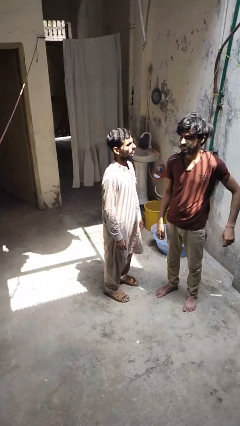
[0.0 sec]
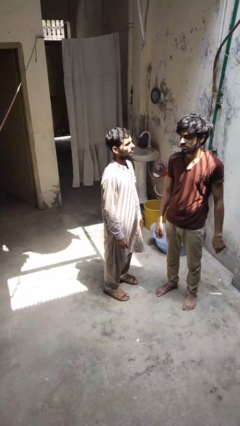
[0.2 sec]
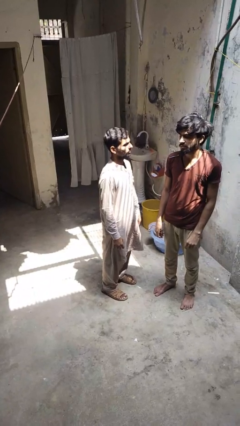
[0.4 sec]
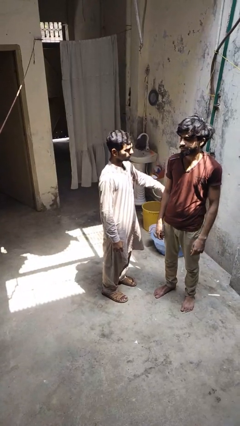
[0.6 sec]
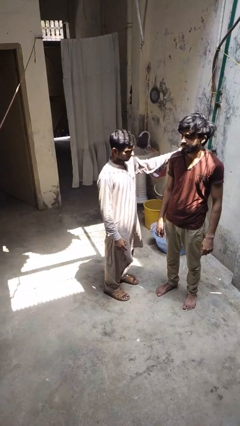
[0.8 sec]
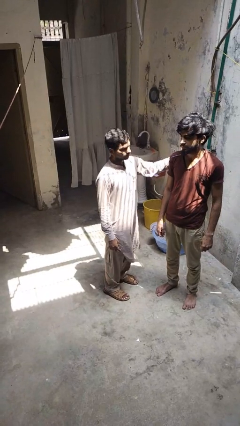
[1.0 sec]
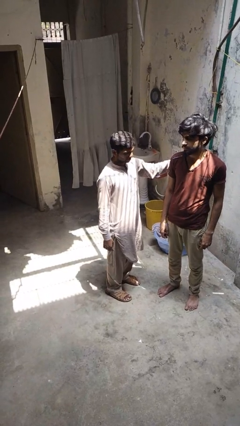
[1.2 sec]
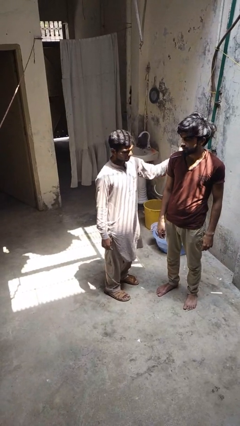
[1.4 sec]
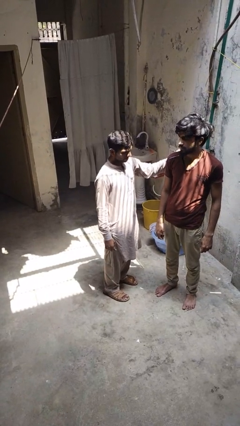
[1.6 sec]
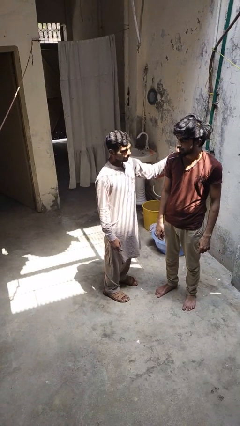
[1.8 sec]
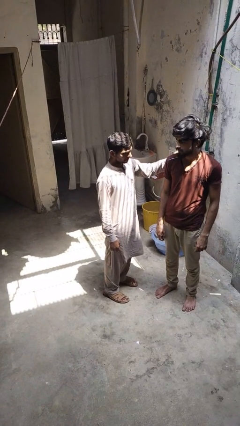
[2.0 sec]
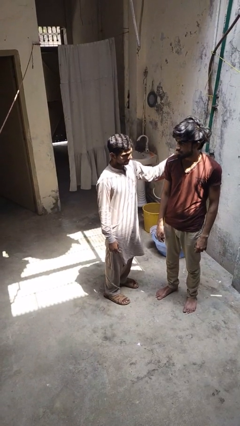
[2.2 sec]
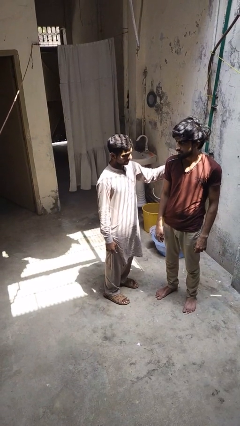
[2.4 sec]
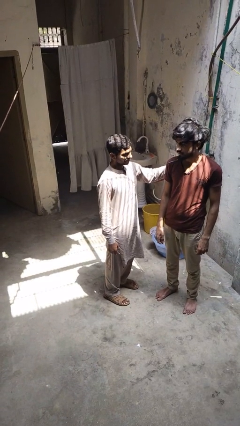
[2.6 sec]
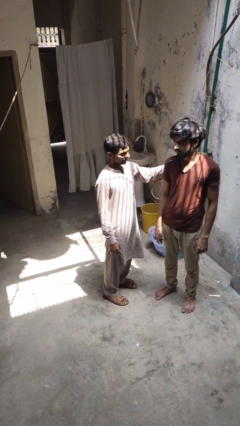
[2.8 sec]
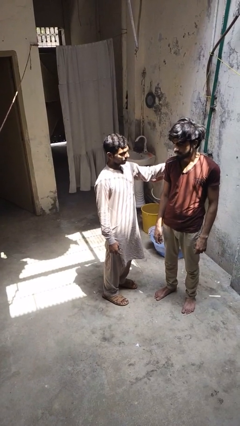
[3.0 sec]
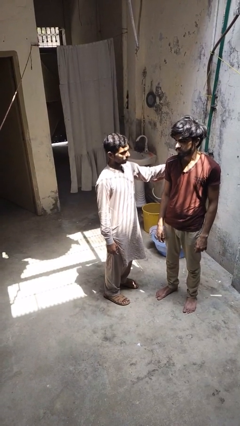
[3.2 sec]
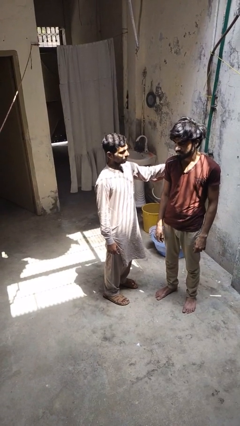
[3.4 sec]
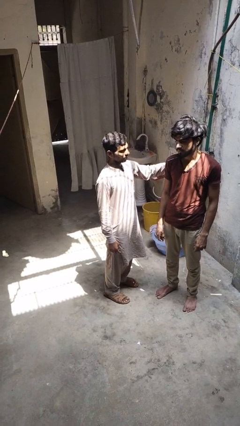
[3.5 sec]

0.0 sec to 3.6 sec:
person pounds shoulders of person

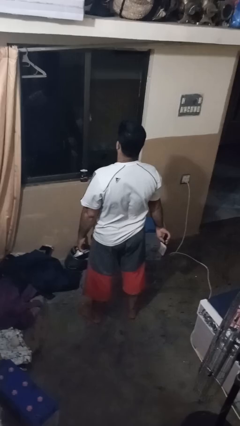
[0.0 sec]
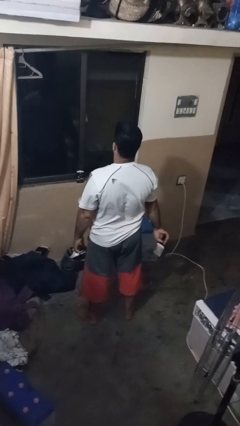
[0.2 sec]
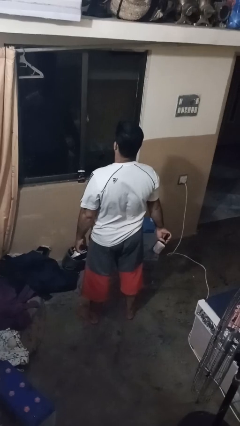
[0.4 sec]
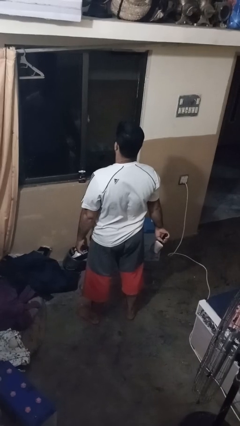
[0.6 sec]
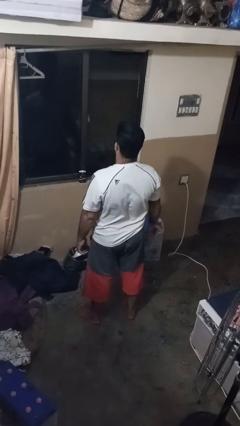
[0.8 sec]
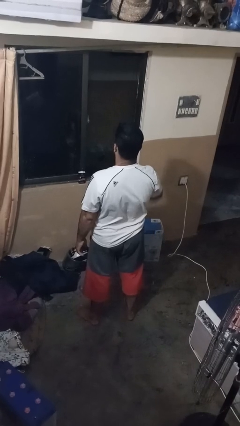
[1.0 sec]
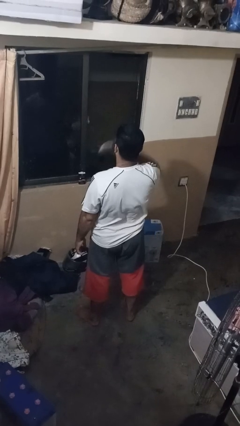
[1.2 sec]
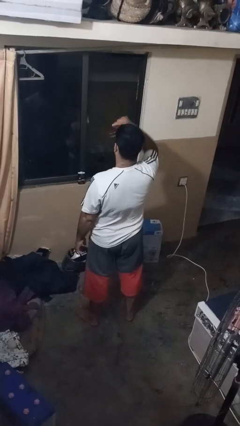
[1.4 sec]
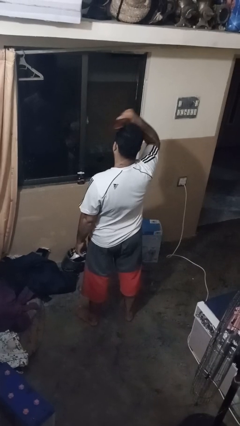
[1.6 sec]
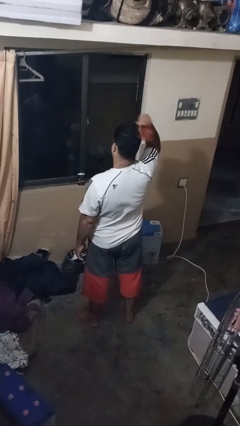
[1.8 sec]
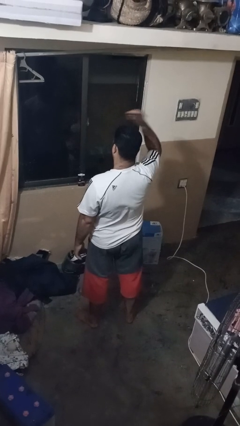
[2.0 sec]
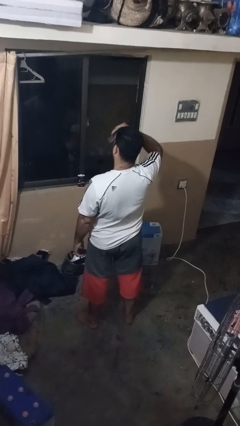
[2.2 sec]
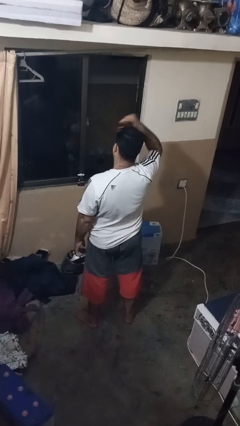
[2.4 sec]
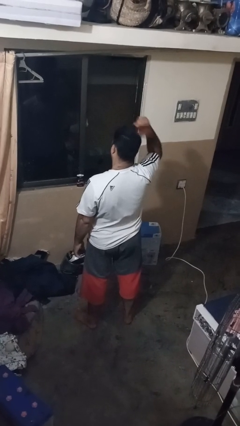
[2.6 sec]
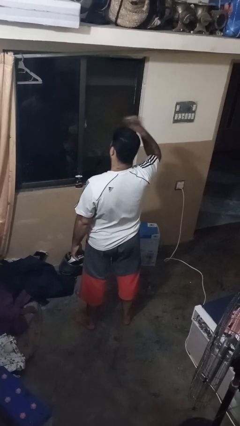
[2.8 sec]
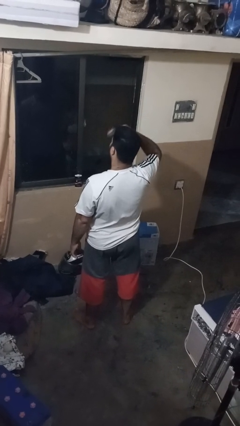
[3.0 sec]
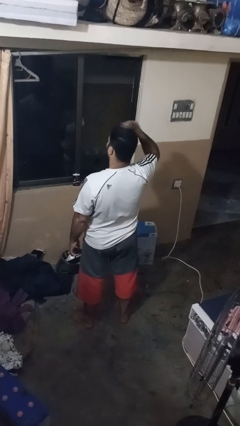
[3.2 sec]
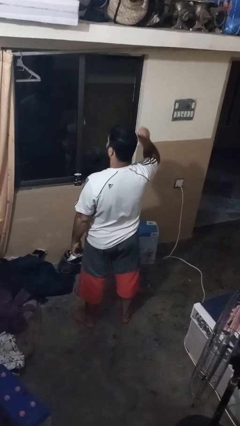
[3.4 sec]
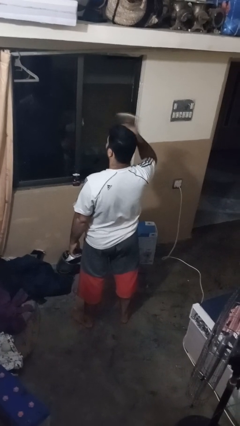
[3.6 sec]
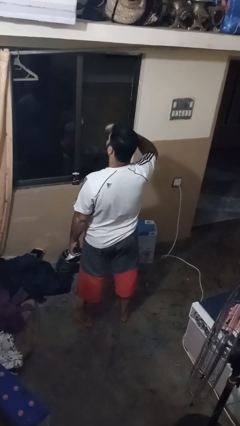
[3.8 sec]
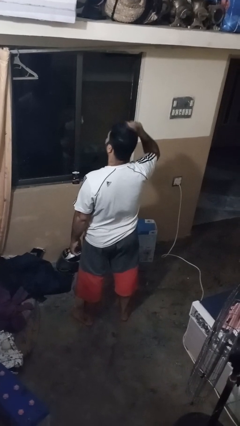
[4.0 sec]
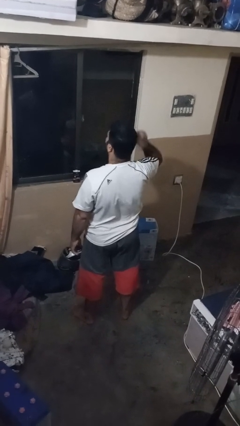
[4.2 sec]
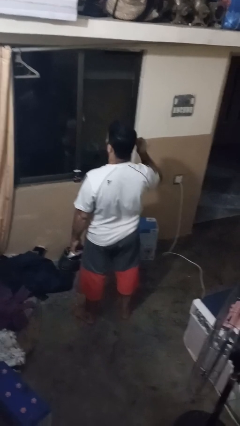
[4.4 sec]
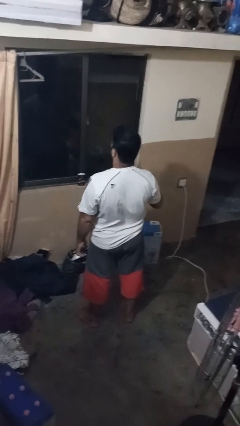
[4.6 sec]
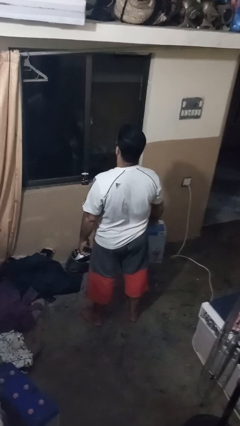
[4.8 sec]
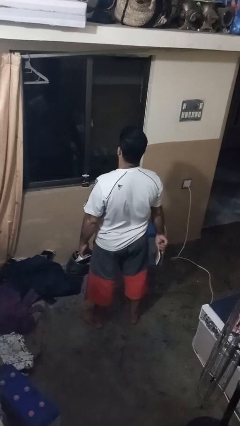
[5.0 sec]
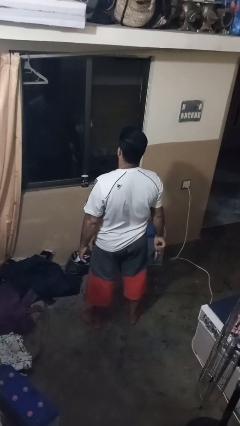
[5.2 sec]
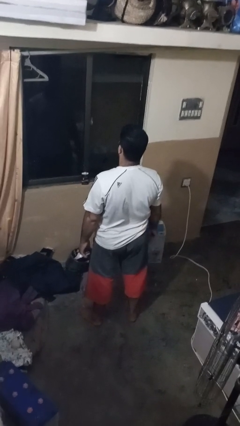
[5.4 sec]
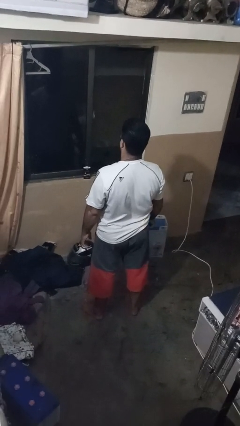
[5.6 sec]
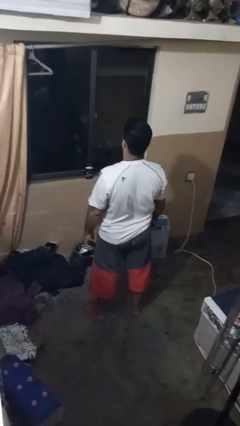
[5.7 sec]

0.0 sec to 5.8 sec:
person brushes hair

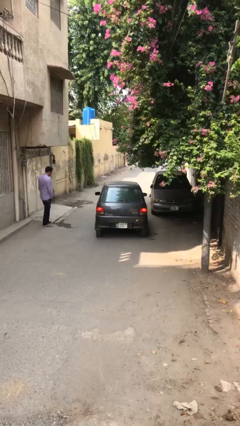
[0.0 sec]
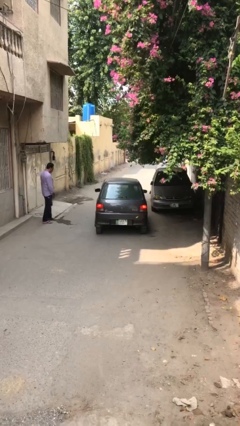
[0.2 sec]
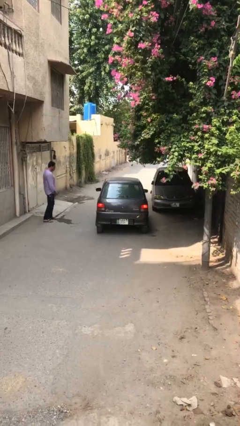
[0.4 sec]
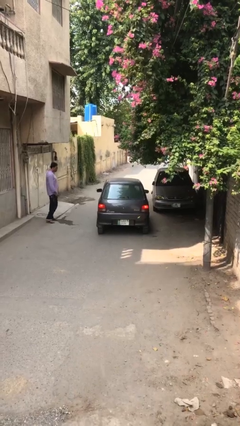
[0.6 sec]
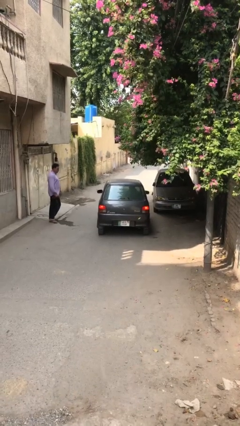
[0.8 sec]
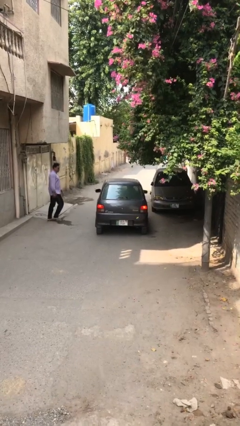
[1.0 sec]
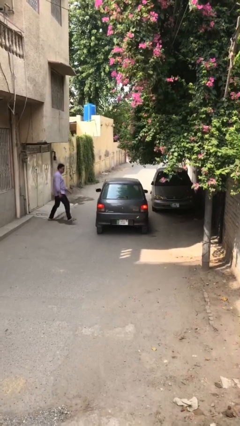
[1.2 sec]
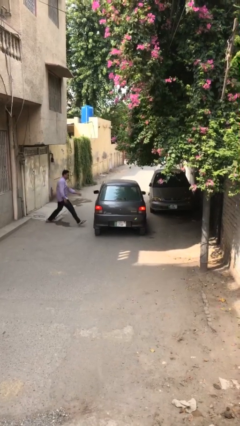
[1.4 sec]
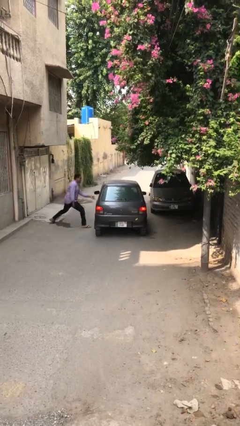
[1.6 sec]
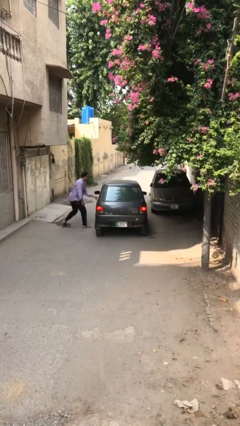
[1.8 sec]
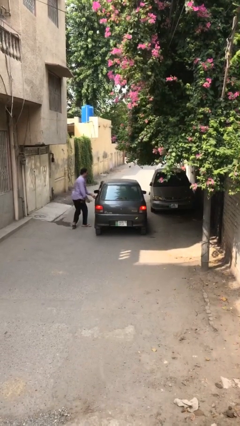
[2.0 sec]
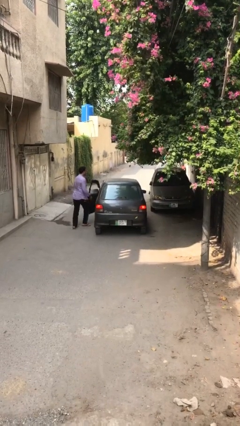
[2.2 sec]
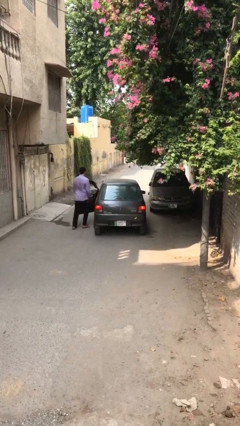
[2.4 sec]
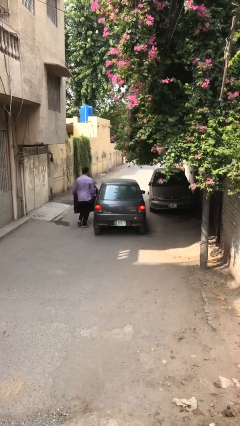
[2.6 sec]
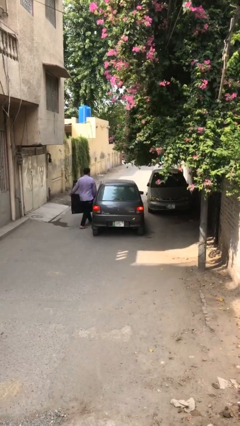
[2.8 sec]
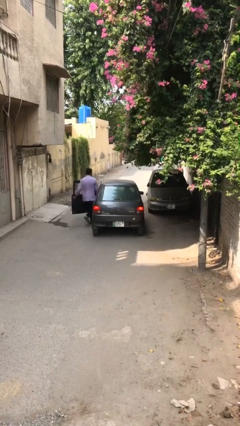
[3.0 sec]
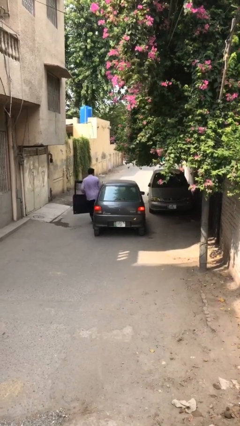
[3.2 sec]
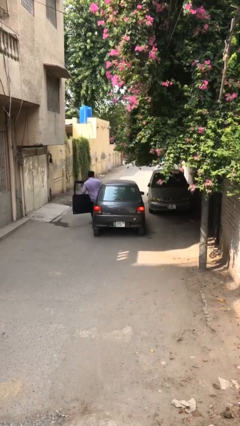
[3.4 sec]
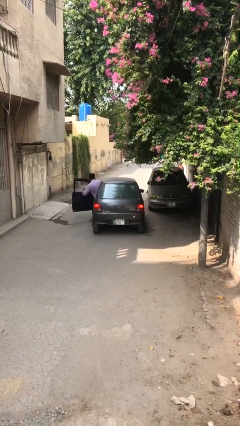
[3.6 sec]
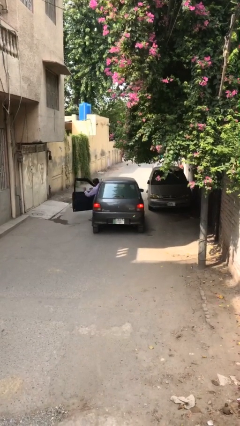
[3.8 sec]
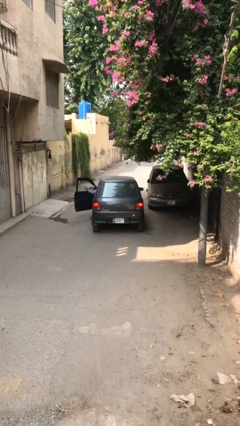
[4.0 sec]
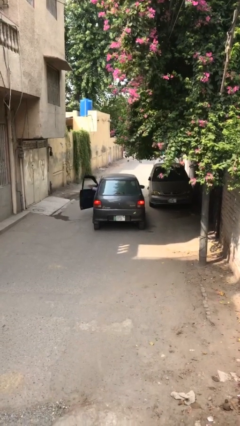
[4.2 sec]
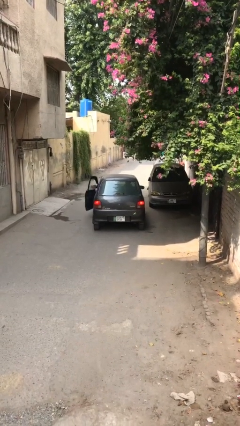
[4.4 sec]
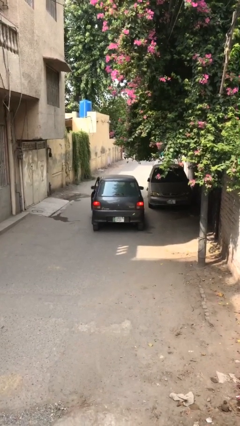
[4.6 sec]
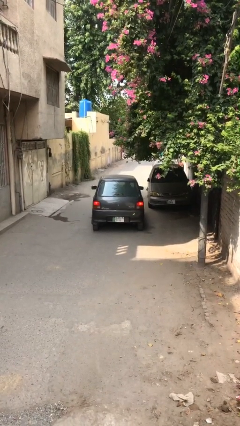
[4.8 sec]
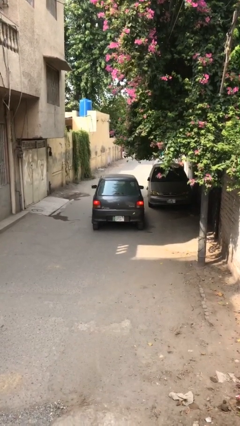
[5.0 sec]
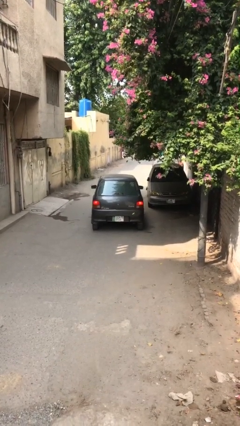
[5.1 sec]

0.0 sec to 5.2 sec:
car picks up person

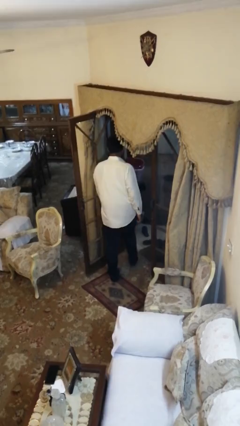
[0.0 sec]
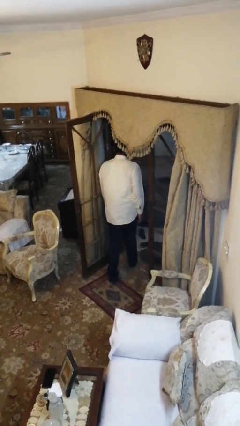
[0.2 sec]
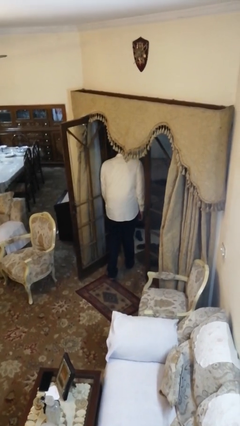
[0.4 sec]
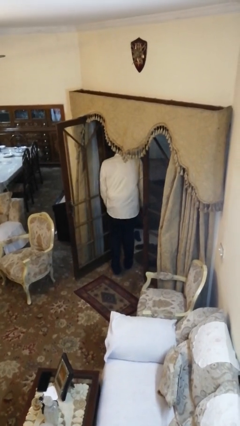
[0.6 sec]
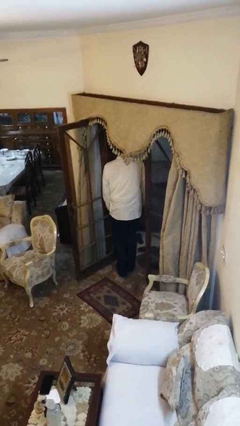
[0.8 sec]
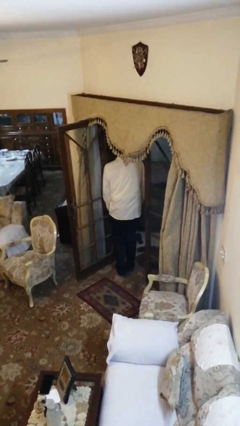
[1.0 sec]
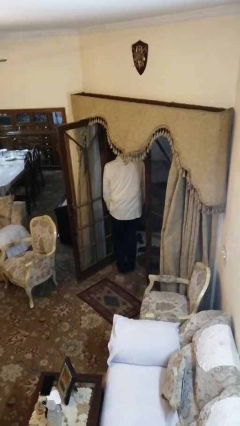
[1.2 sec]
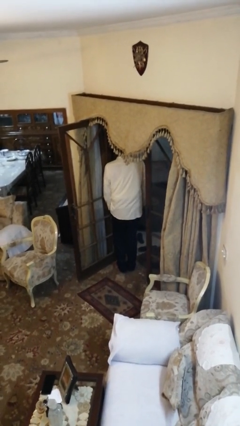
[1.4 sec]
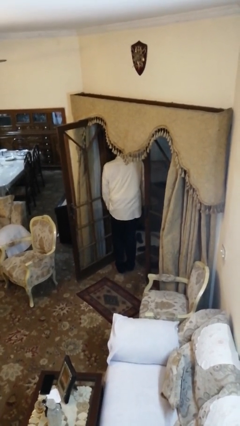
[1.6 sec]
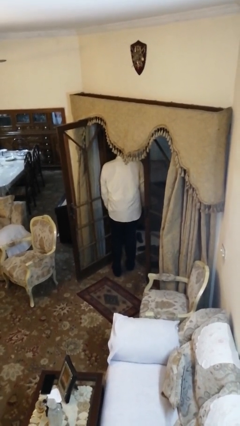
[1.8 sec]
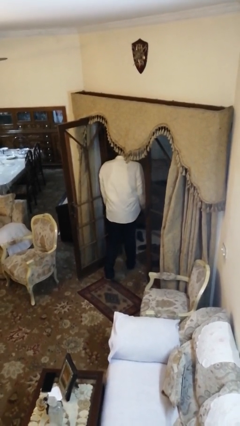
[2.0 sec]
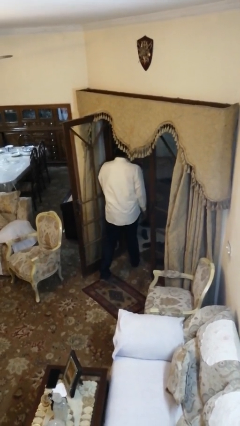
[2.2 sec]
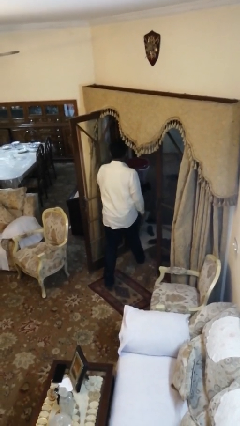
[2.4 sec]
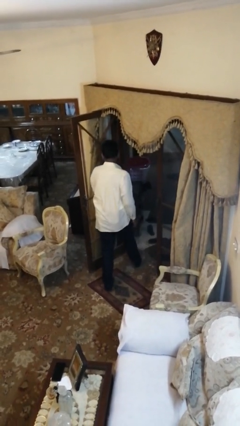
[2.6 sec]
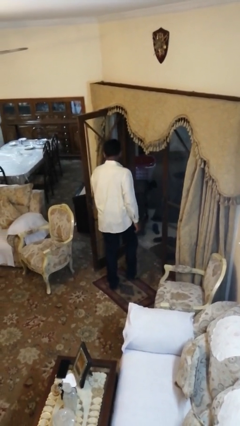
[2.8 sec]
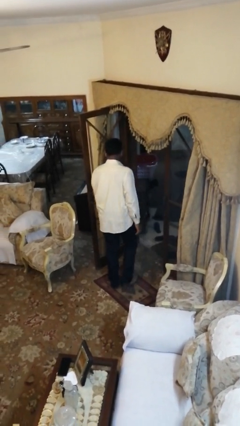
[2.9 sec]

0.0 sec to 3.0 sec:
person bumps into wall

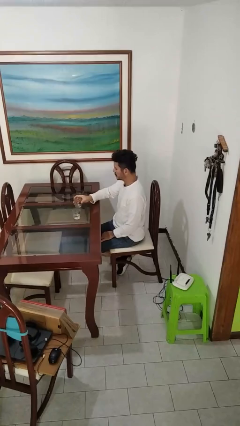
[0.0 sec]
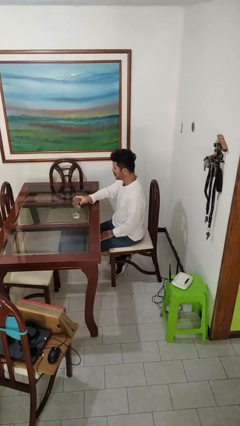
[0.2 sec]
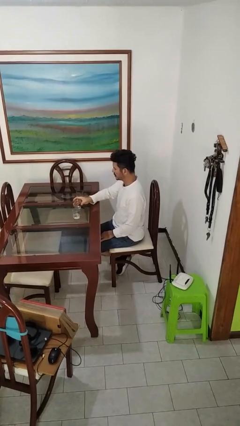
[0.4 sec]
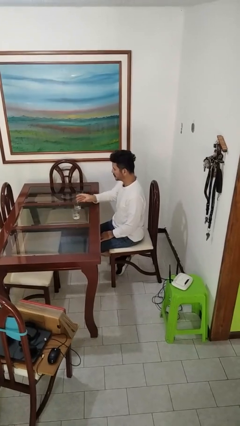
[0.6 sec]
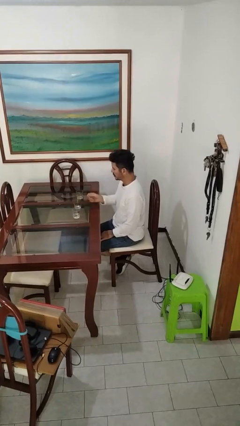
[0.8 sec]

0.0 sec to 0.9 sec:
person puts down object on table
